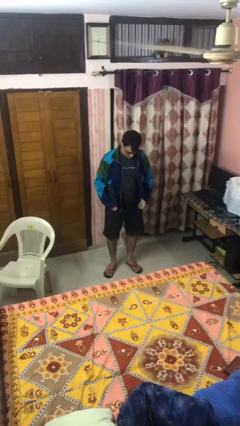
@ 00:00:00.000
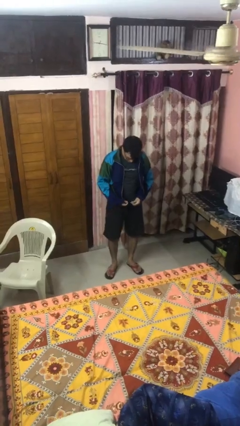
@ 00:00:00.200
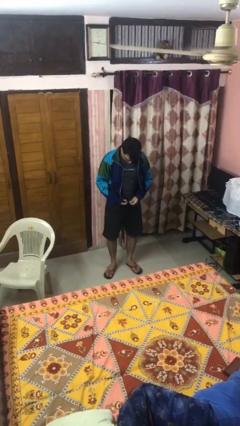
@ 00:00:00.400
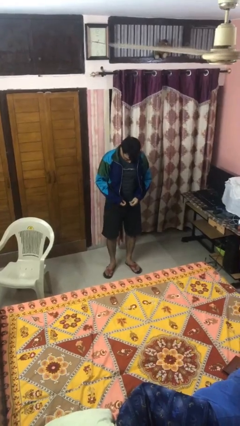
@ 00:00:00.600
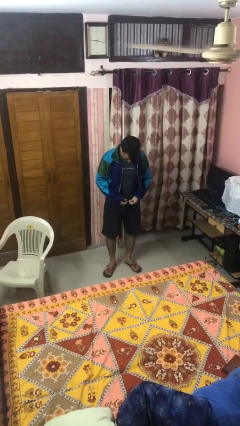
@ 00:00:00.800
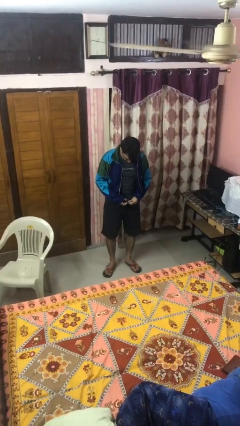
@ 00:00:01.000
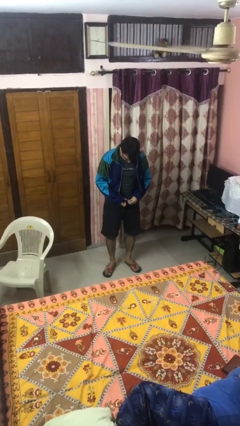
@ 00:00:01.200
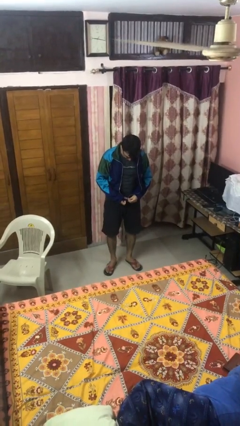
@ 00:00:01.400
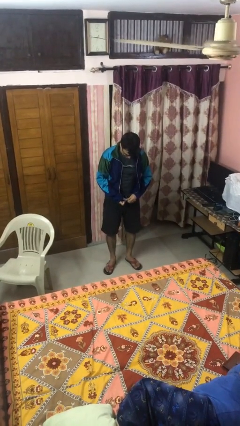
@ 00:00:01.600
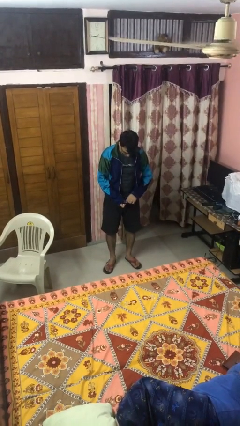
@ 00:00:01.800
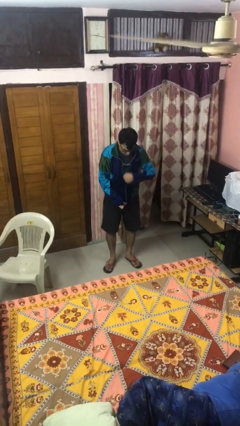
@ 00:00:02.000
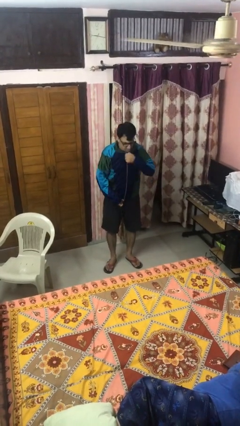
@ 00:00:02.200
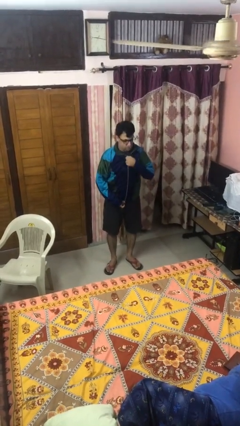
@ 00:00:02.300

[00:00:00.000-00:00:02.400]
person zips up jacket

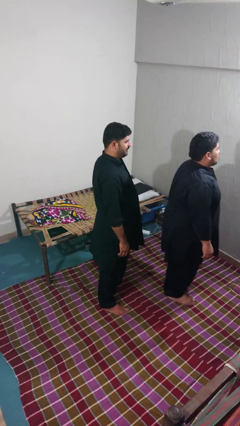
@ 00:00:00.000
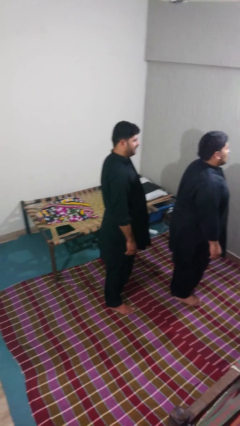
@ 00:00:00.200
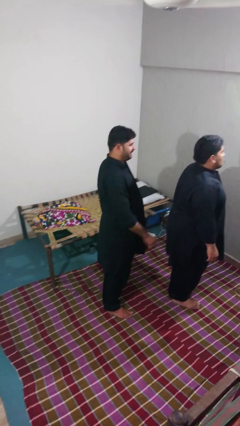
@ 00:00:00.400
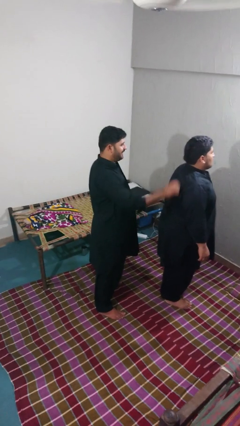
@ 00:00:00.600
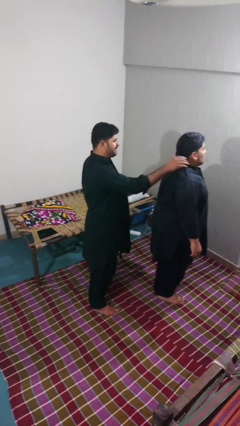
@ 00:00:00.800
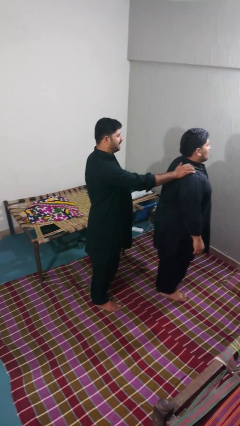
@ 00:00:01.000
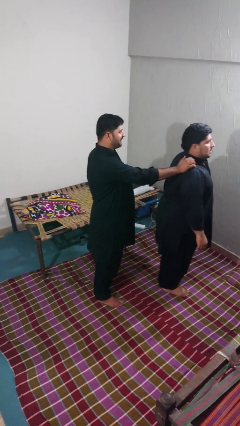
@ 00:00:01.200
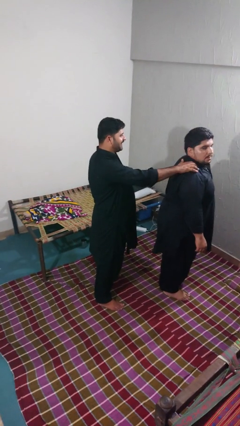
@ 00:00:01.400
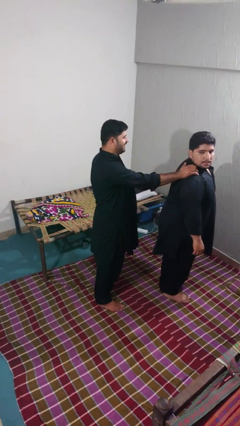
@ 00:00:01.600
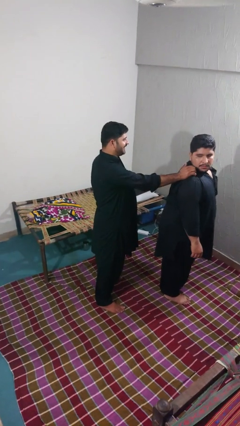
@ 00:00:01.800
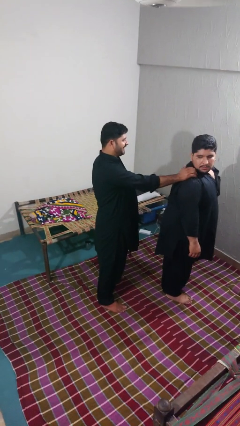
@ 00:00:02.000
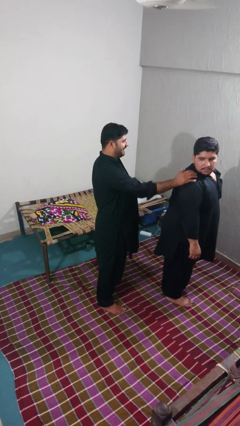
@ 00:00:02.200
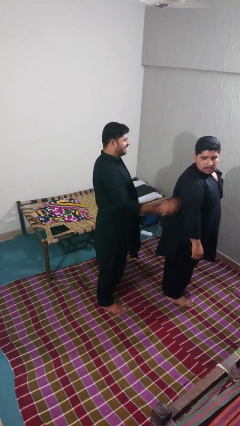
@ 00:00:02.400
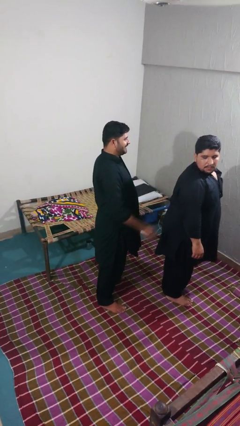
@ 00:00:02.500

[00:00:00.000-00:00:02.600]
person touches back of person

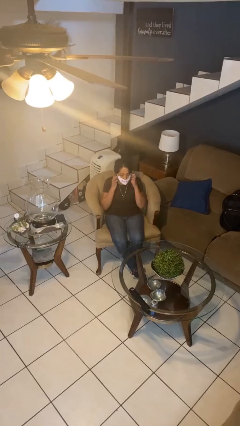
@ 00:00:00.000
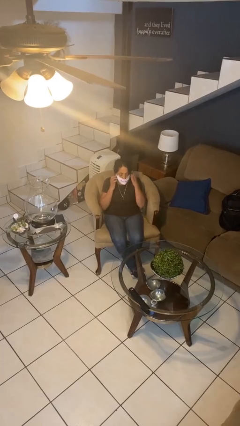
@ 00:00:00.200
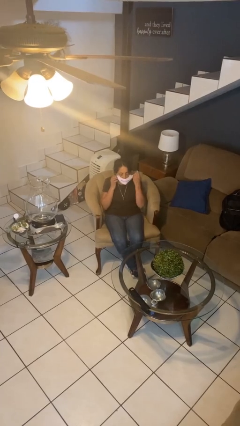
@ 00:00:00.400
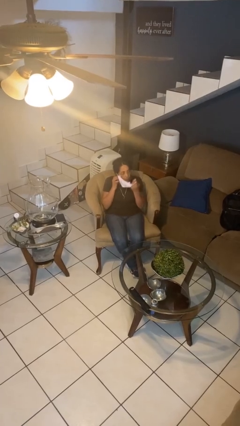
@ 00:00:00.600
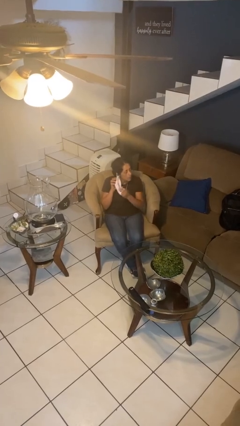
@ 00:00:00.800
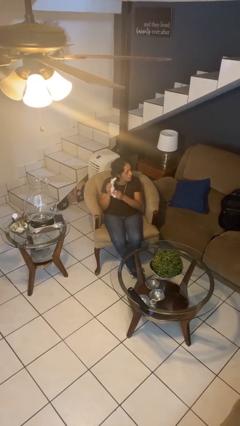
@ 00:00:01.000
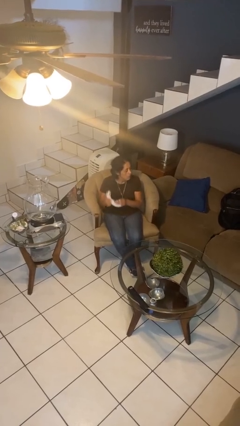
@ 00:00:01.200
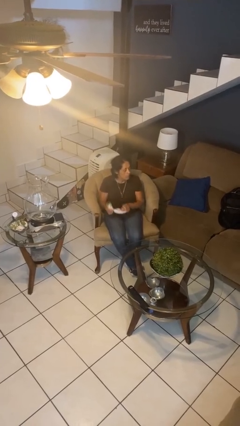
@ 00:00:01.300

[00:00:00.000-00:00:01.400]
person takes off facemask

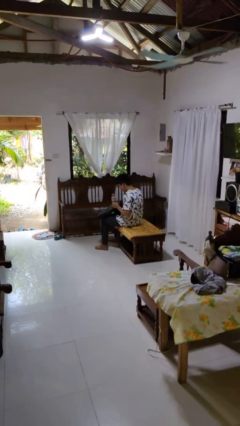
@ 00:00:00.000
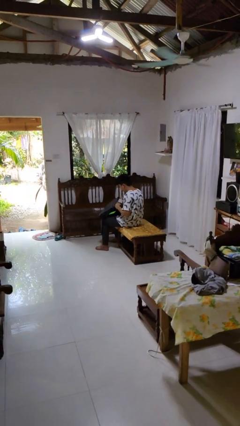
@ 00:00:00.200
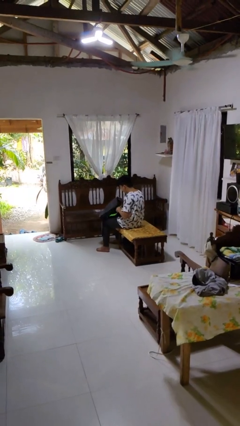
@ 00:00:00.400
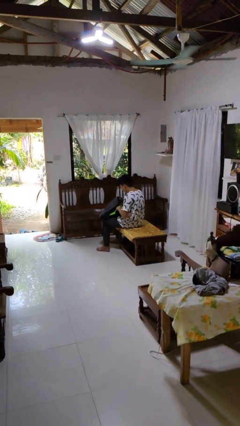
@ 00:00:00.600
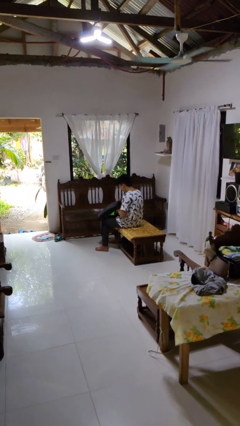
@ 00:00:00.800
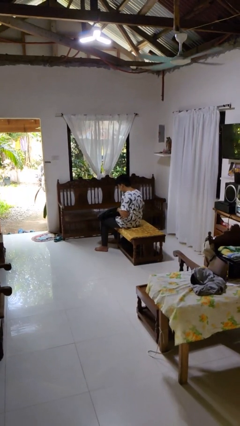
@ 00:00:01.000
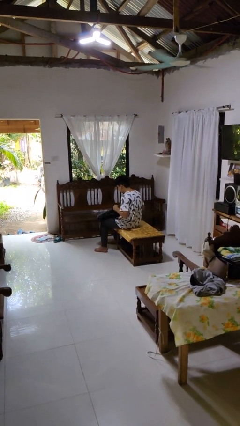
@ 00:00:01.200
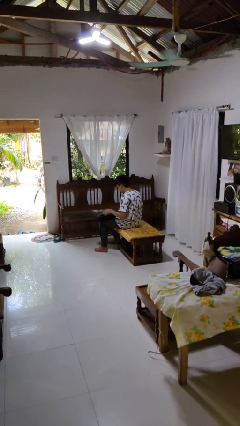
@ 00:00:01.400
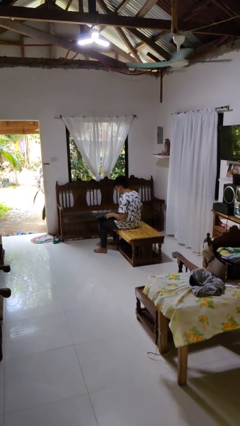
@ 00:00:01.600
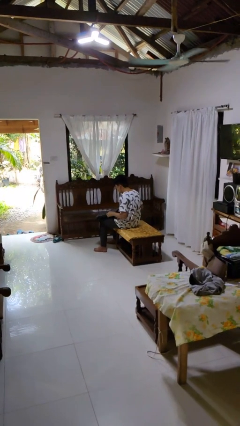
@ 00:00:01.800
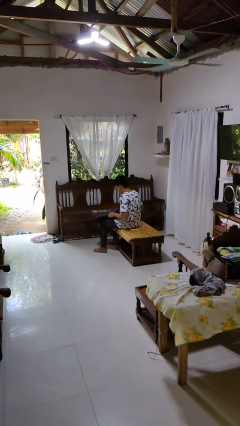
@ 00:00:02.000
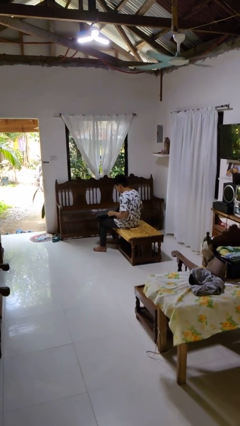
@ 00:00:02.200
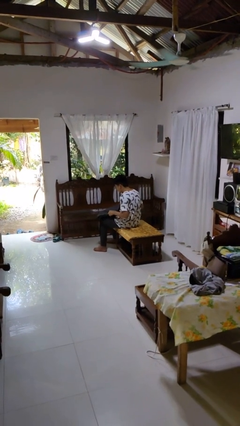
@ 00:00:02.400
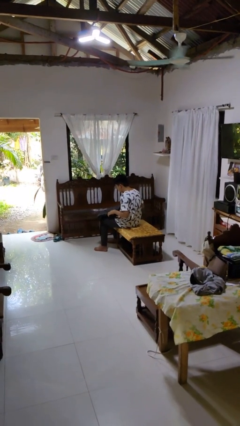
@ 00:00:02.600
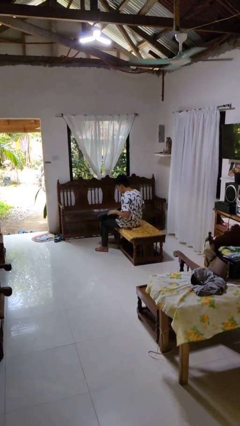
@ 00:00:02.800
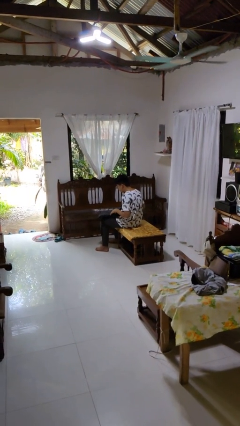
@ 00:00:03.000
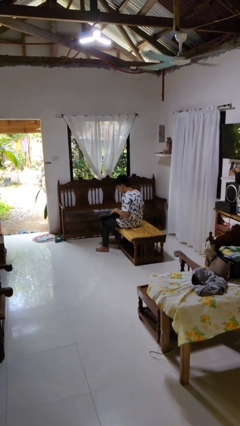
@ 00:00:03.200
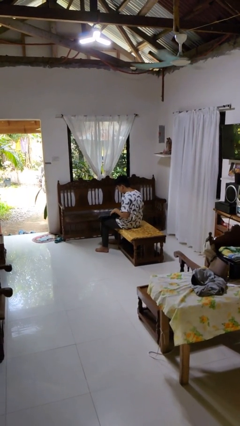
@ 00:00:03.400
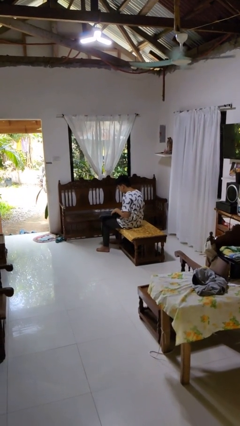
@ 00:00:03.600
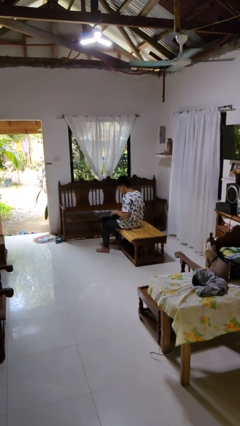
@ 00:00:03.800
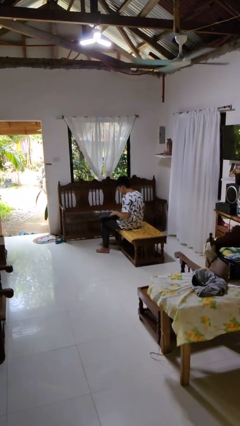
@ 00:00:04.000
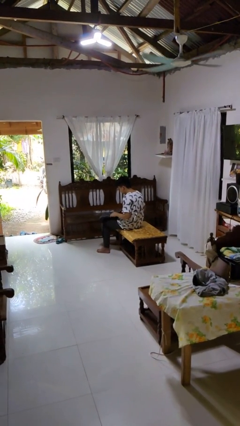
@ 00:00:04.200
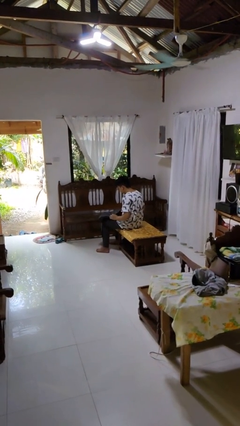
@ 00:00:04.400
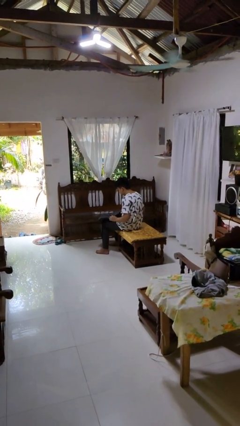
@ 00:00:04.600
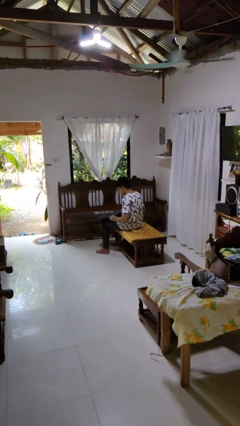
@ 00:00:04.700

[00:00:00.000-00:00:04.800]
person puts object into backpack

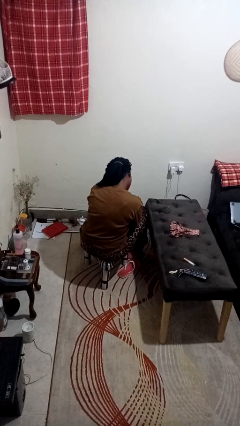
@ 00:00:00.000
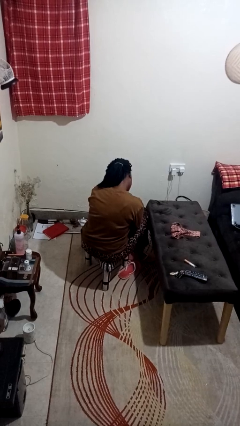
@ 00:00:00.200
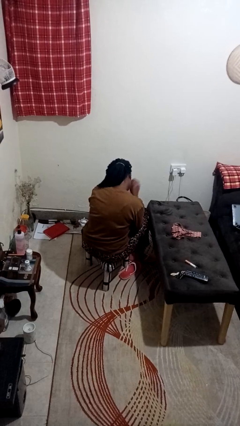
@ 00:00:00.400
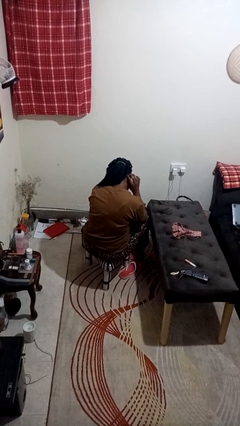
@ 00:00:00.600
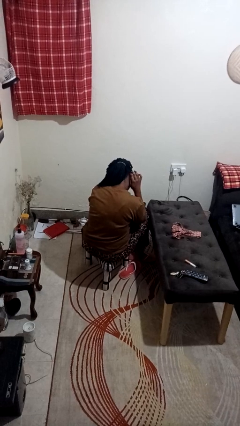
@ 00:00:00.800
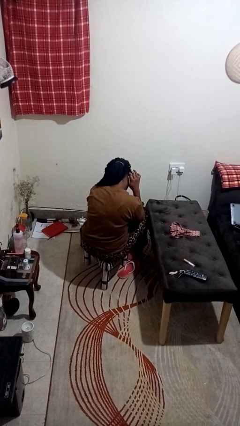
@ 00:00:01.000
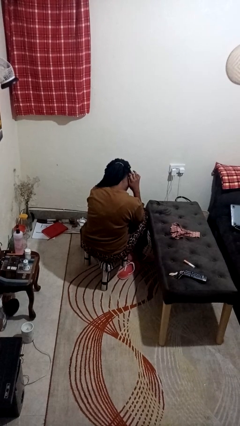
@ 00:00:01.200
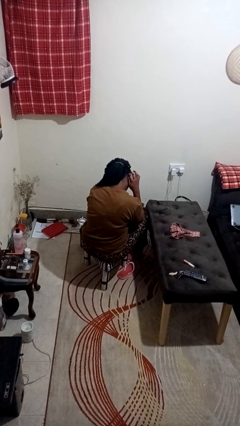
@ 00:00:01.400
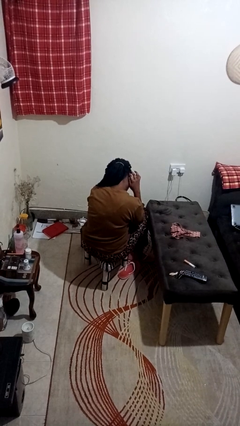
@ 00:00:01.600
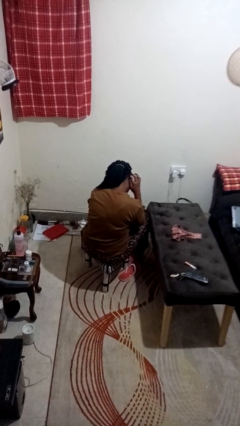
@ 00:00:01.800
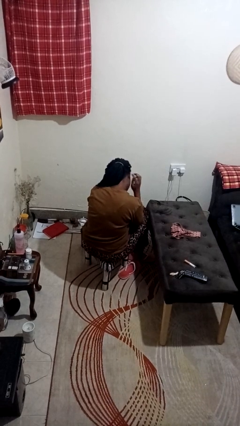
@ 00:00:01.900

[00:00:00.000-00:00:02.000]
person gestures listen closely

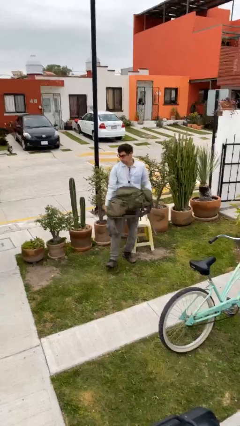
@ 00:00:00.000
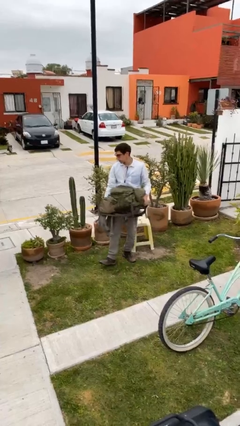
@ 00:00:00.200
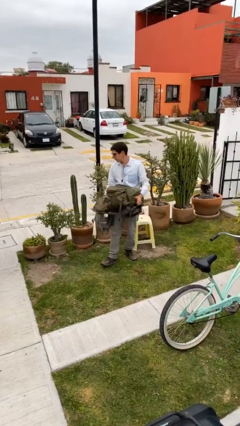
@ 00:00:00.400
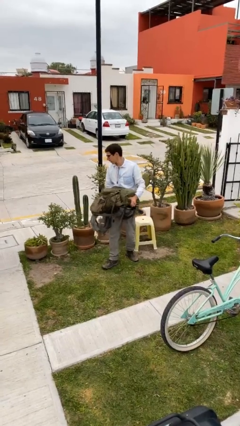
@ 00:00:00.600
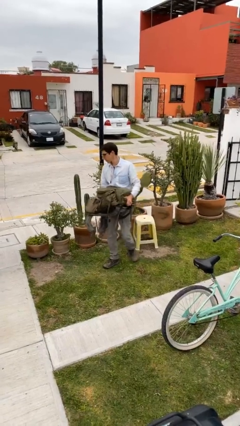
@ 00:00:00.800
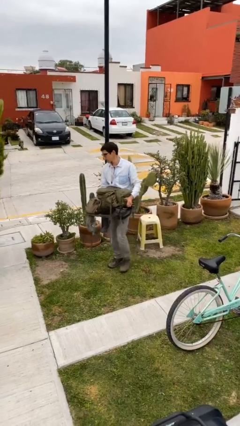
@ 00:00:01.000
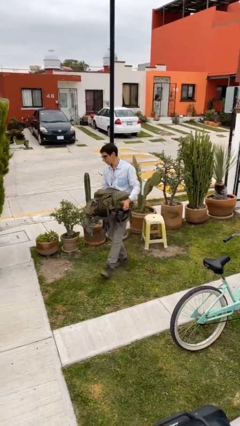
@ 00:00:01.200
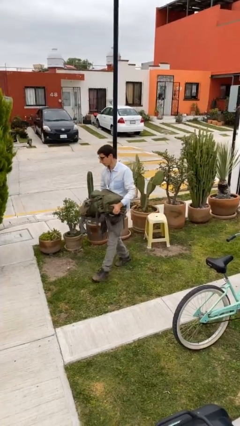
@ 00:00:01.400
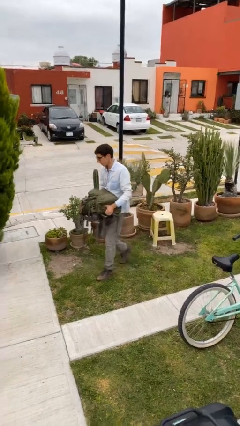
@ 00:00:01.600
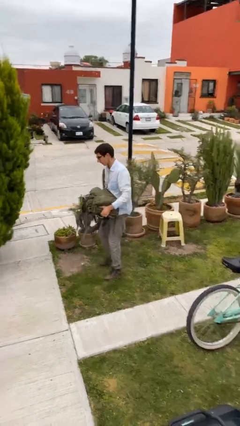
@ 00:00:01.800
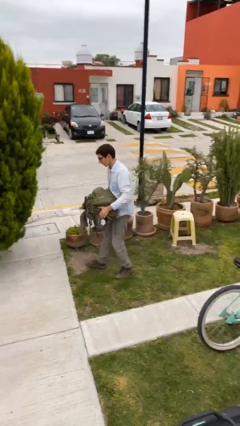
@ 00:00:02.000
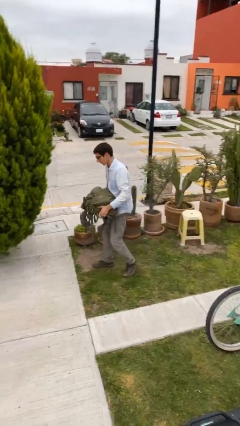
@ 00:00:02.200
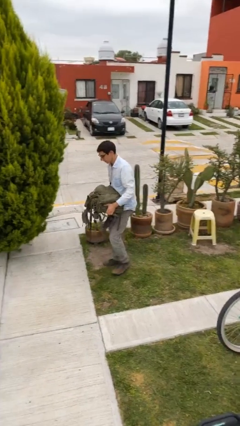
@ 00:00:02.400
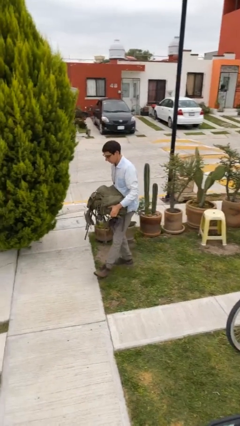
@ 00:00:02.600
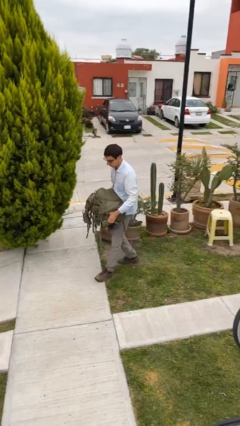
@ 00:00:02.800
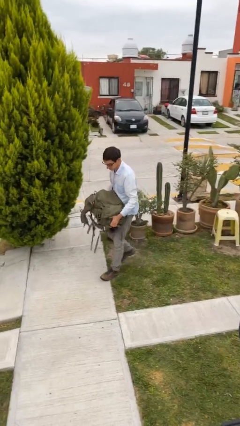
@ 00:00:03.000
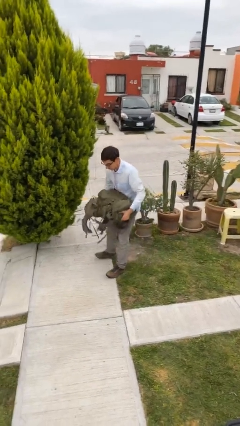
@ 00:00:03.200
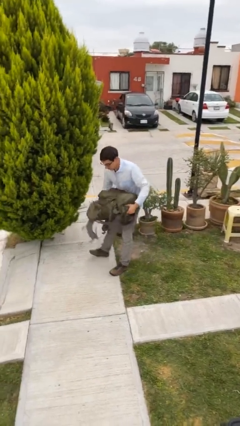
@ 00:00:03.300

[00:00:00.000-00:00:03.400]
person carries heavy object
